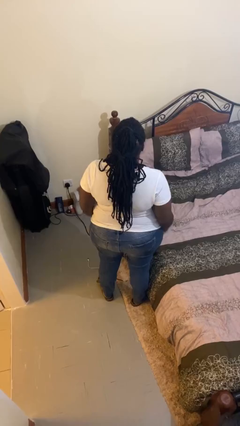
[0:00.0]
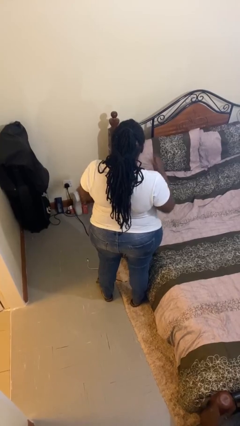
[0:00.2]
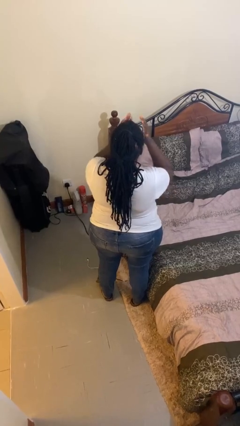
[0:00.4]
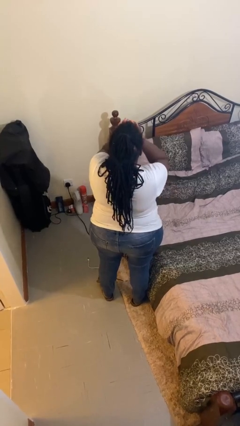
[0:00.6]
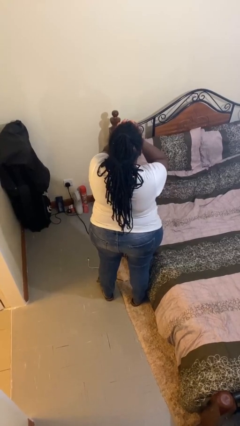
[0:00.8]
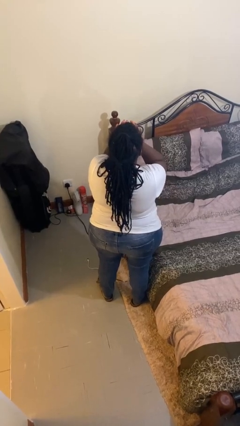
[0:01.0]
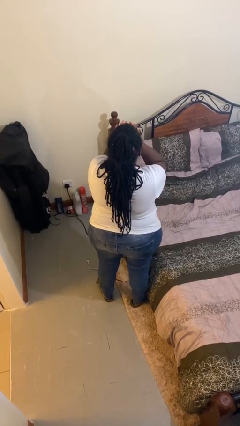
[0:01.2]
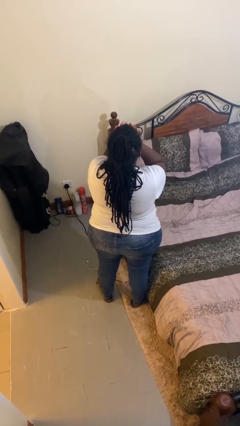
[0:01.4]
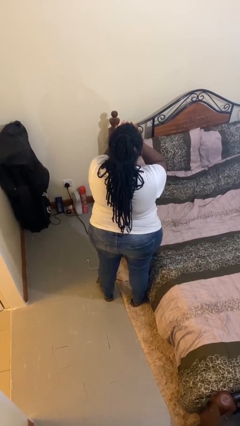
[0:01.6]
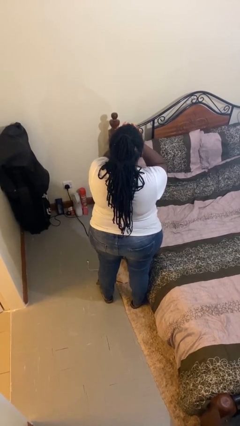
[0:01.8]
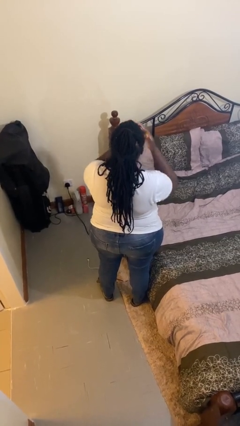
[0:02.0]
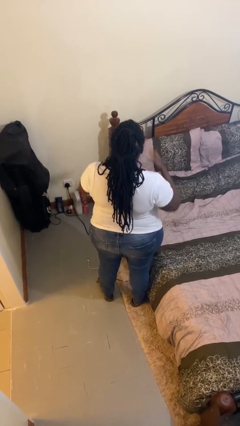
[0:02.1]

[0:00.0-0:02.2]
person covers face with hands

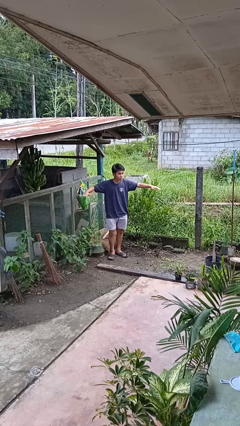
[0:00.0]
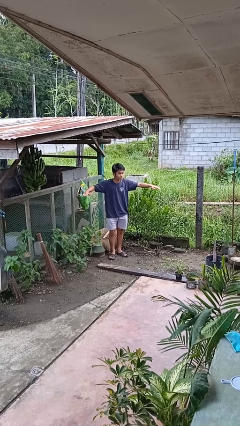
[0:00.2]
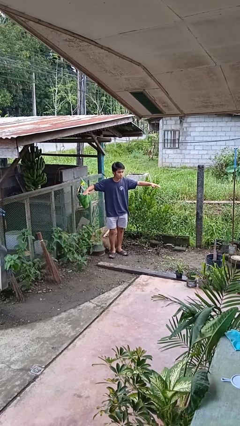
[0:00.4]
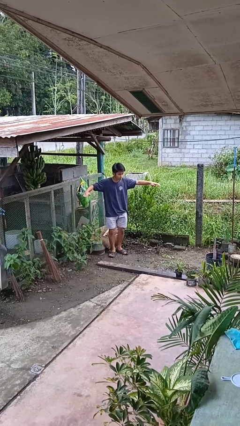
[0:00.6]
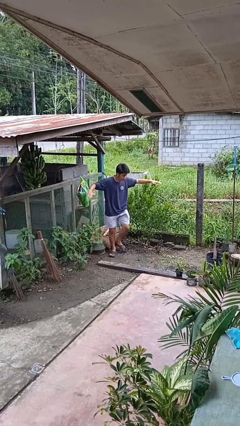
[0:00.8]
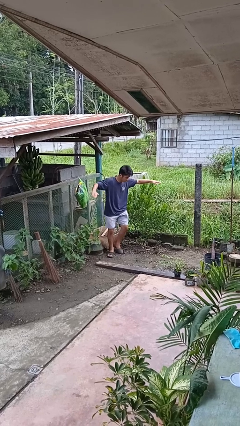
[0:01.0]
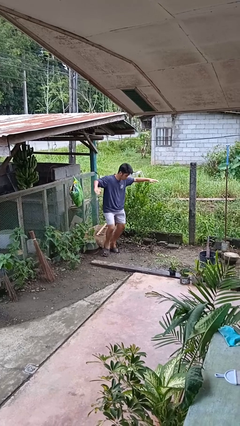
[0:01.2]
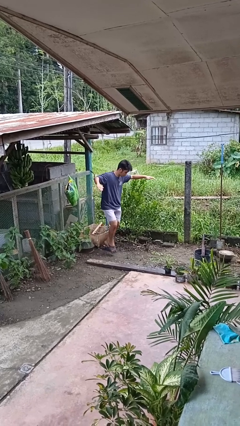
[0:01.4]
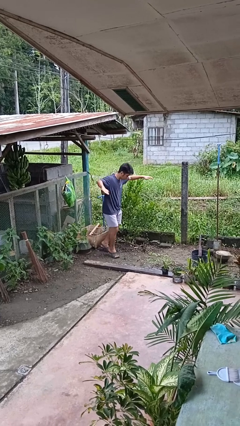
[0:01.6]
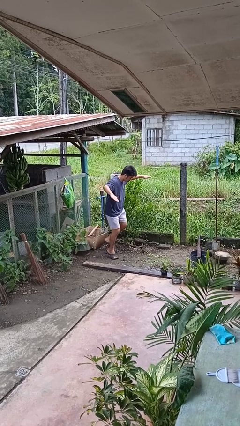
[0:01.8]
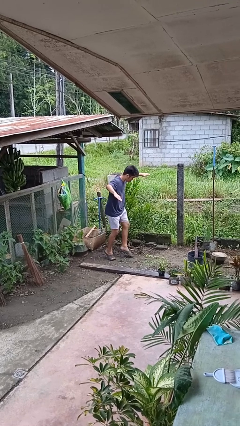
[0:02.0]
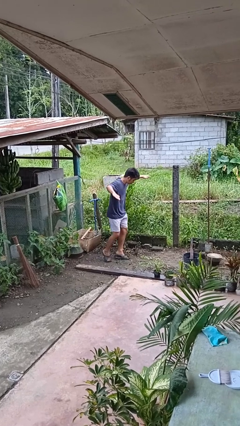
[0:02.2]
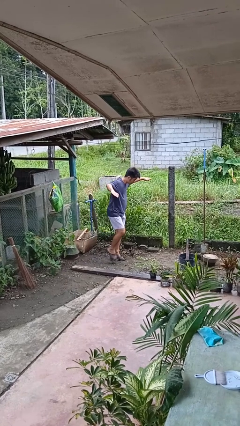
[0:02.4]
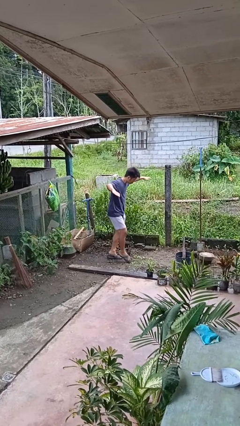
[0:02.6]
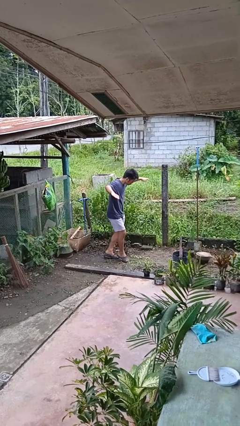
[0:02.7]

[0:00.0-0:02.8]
person walks tiptoe

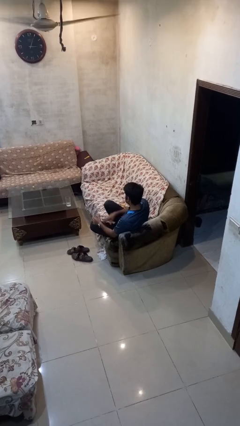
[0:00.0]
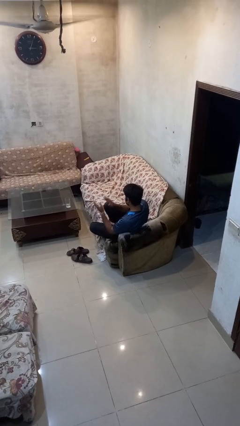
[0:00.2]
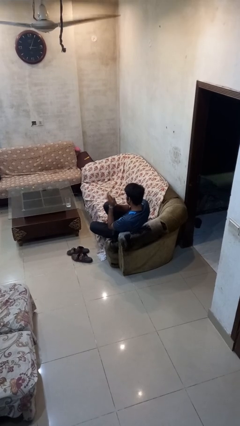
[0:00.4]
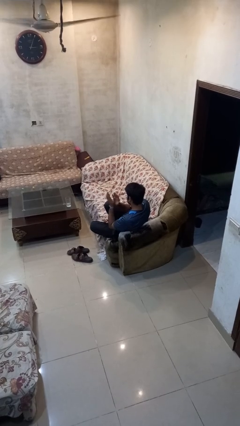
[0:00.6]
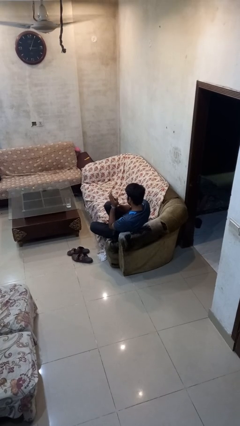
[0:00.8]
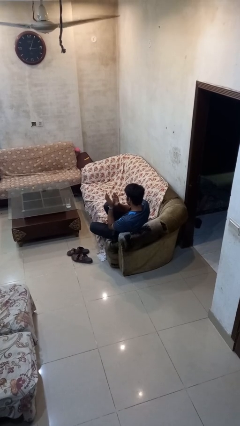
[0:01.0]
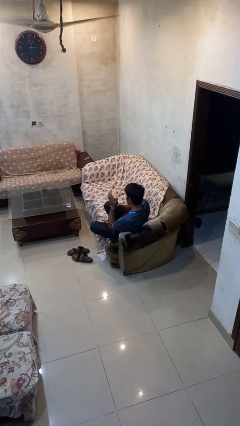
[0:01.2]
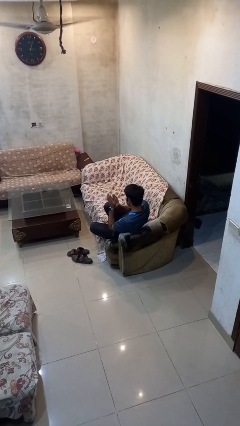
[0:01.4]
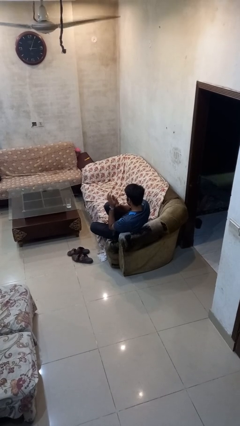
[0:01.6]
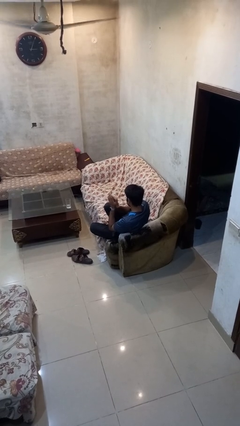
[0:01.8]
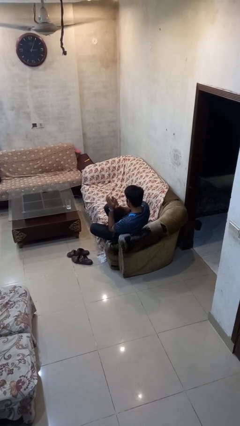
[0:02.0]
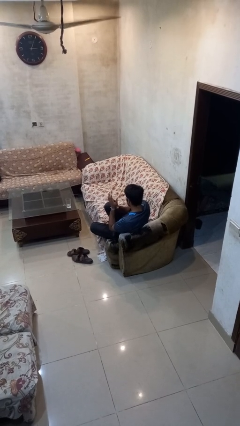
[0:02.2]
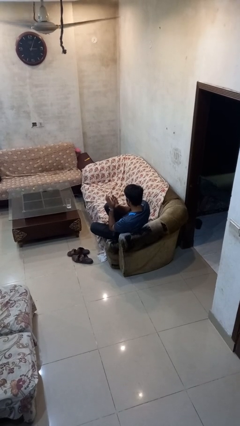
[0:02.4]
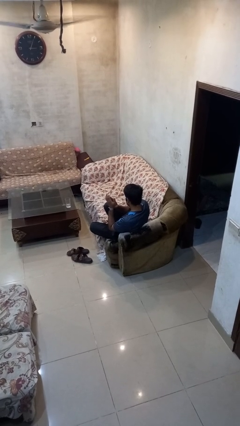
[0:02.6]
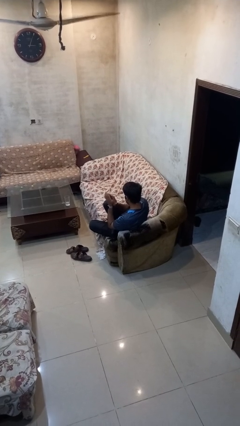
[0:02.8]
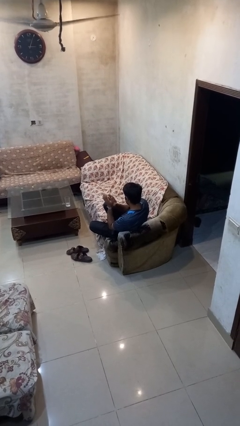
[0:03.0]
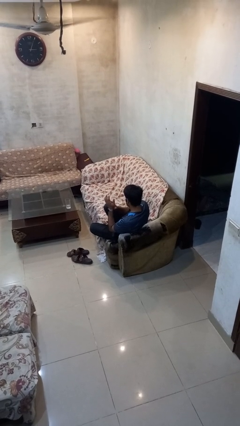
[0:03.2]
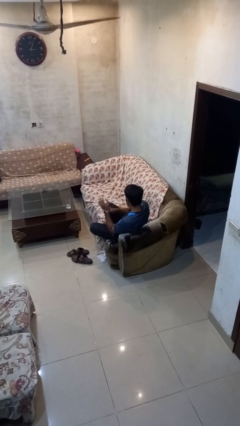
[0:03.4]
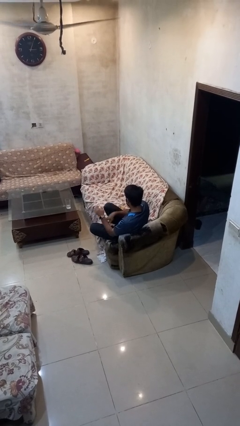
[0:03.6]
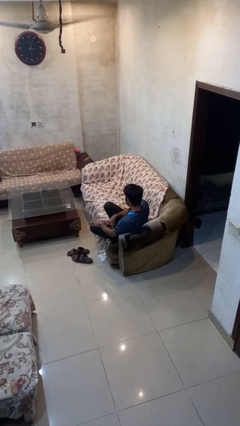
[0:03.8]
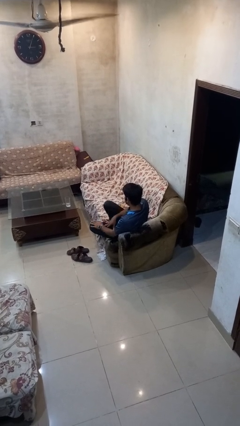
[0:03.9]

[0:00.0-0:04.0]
person claps hands

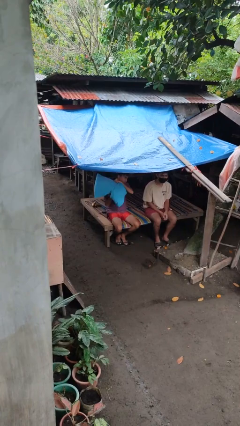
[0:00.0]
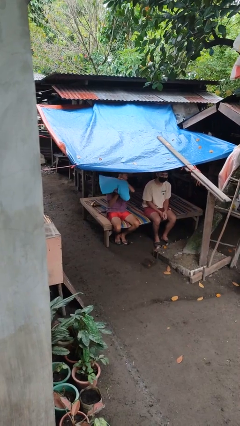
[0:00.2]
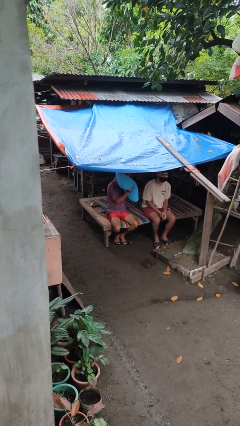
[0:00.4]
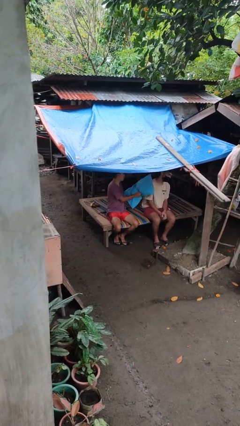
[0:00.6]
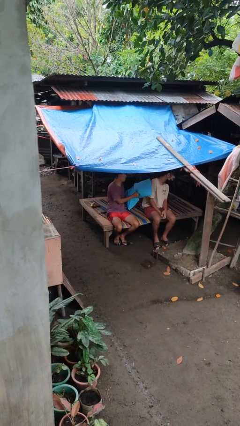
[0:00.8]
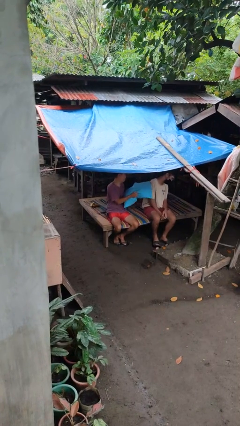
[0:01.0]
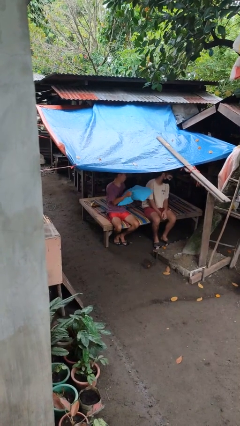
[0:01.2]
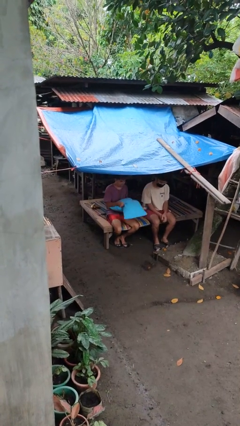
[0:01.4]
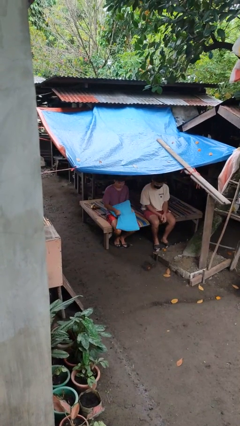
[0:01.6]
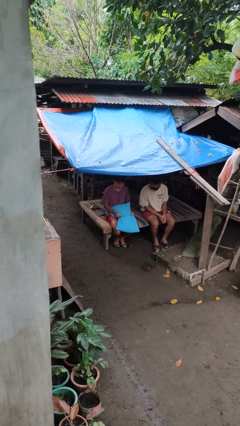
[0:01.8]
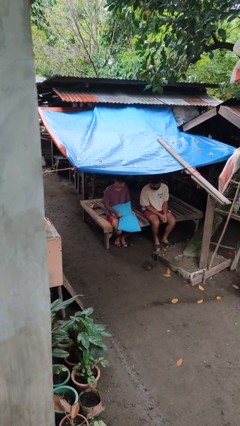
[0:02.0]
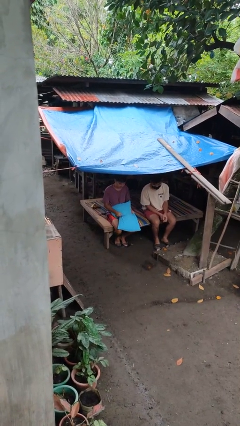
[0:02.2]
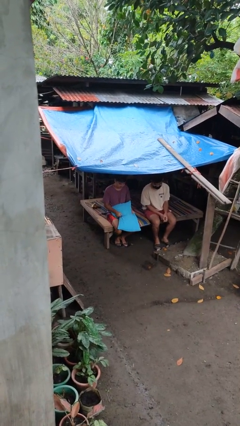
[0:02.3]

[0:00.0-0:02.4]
person hits person with pillow

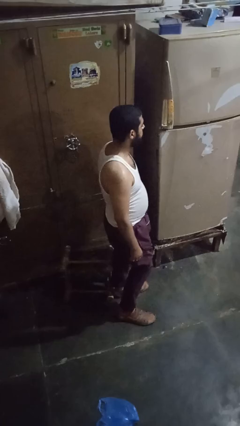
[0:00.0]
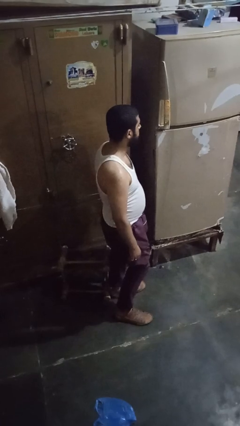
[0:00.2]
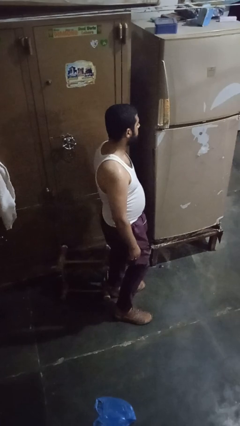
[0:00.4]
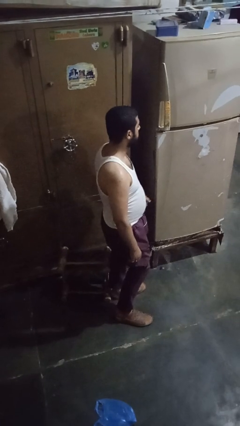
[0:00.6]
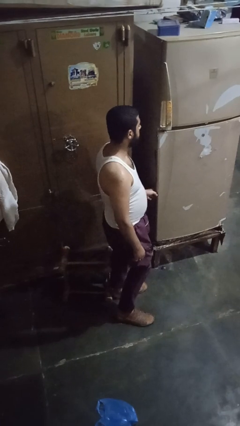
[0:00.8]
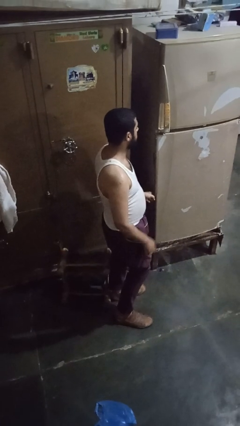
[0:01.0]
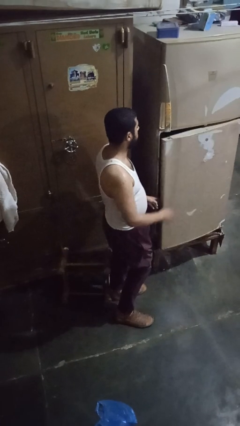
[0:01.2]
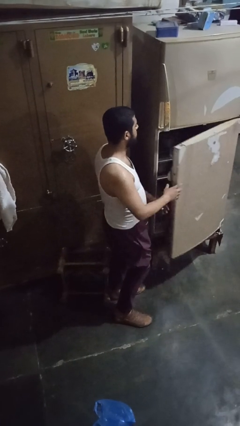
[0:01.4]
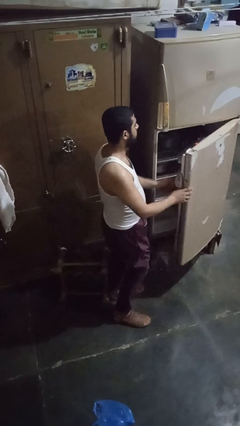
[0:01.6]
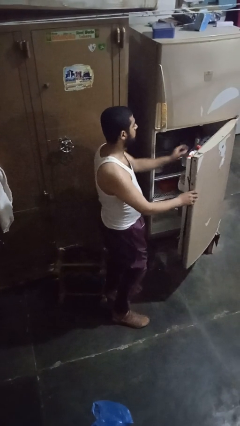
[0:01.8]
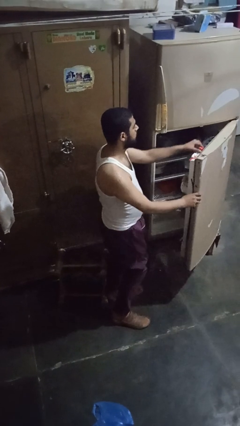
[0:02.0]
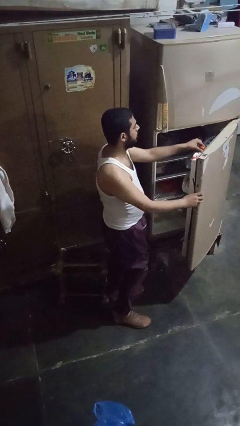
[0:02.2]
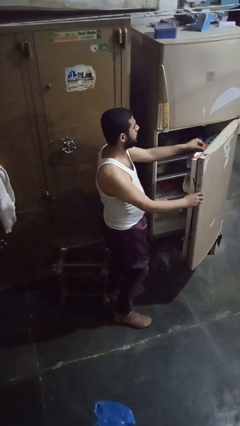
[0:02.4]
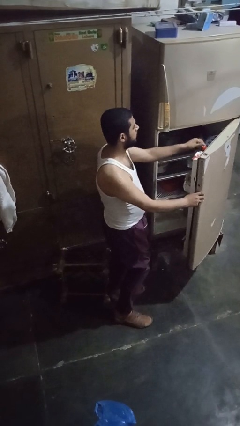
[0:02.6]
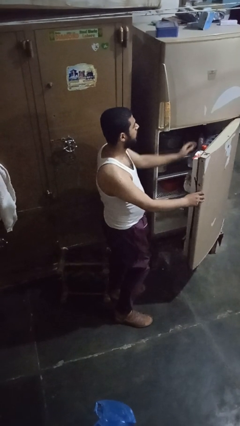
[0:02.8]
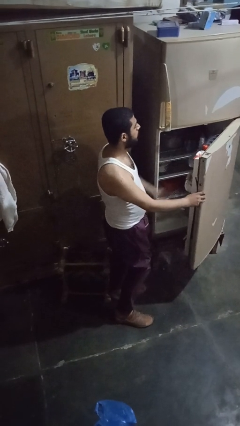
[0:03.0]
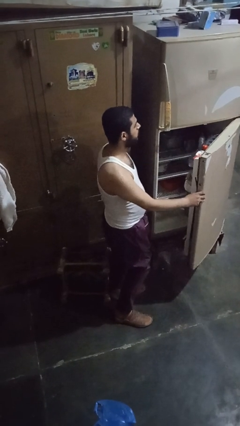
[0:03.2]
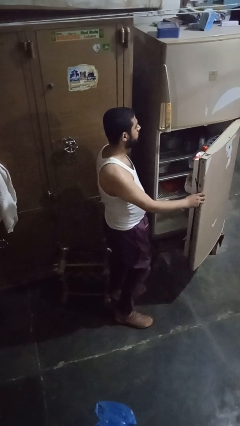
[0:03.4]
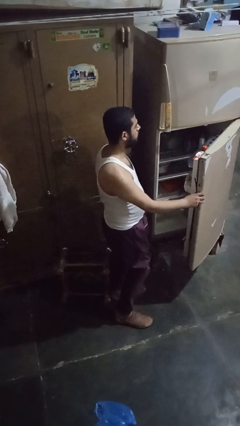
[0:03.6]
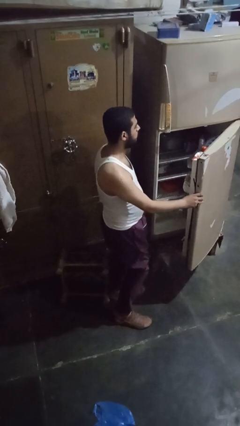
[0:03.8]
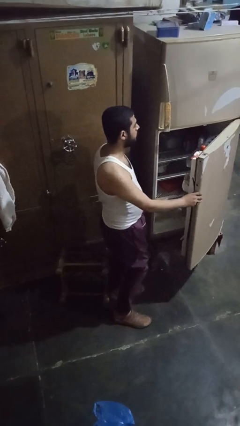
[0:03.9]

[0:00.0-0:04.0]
person opens refrigerator

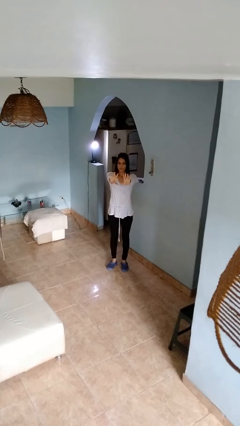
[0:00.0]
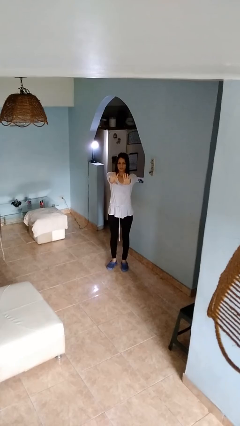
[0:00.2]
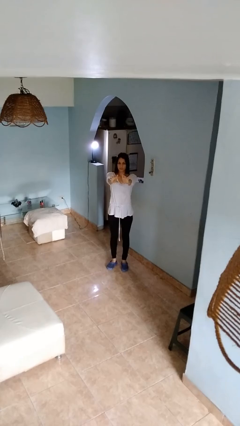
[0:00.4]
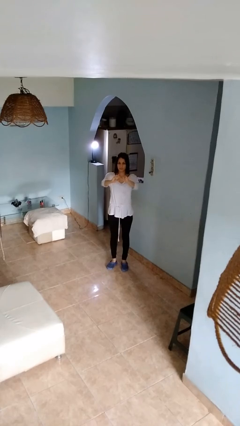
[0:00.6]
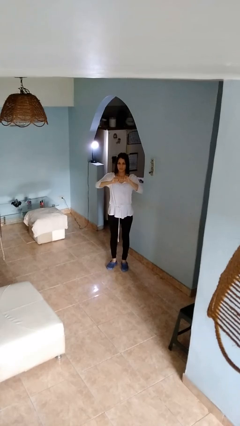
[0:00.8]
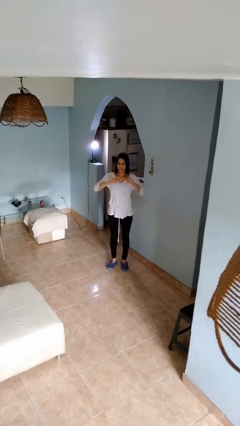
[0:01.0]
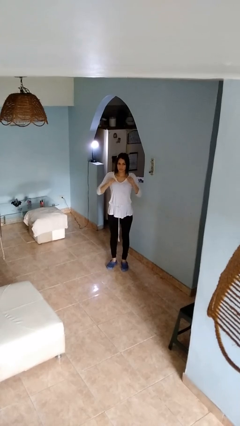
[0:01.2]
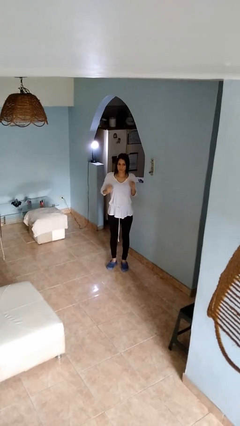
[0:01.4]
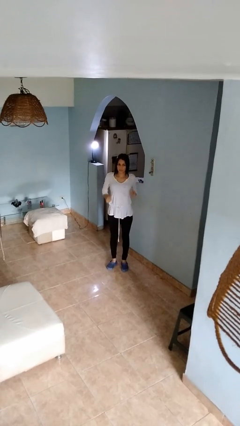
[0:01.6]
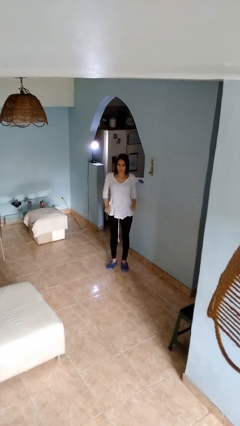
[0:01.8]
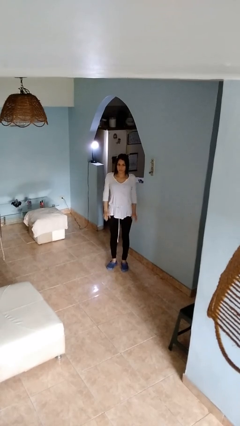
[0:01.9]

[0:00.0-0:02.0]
person gestures zoom out
